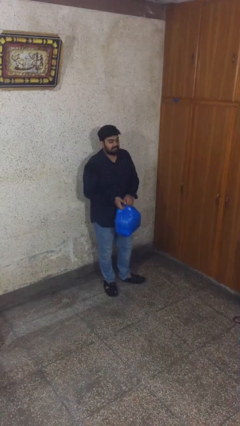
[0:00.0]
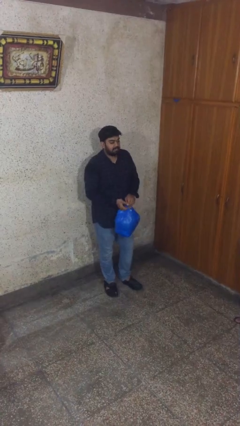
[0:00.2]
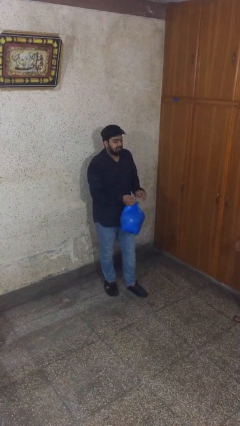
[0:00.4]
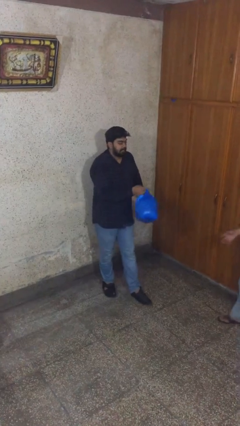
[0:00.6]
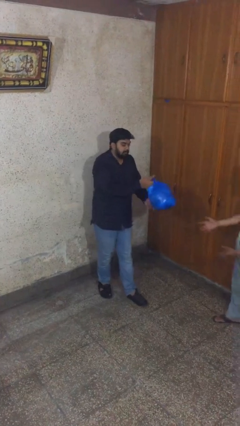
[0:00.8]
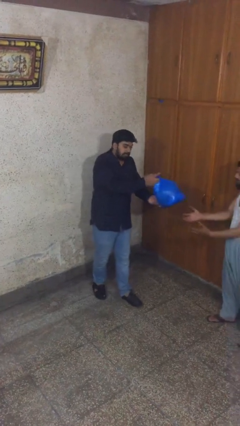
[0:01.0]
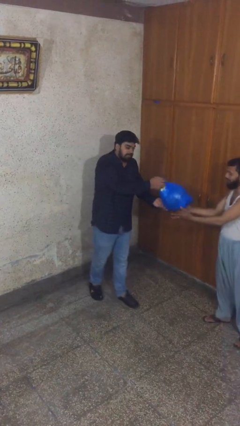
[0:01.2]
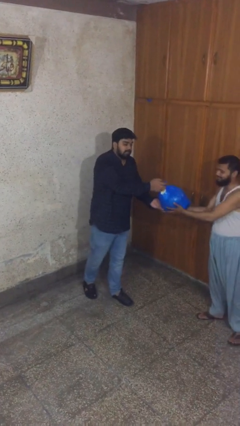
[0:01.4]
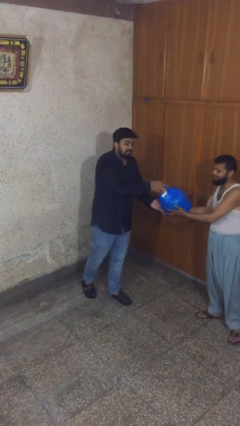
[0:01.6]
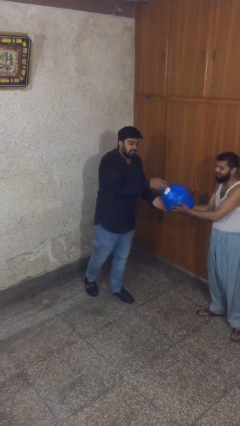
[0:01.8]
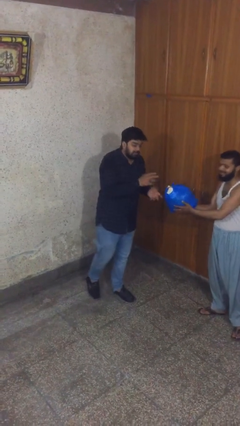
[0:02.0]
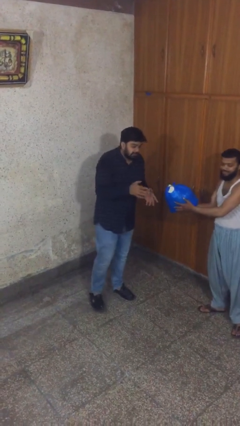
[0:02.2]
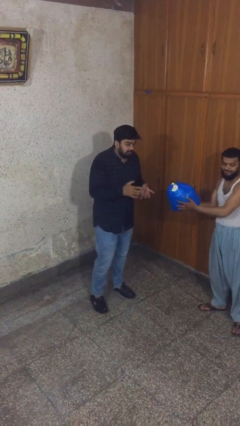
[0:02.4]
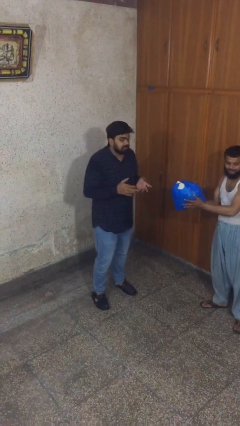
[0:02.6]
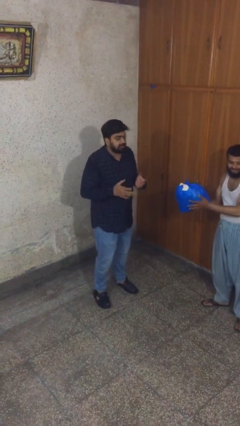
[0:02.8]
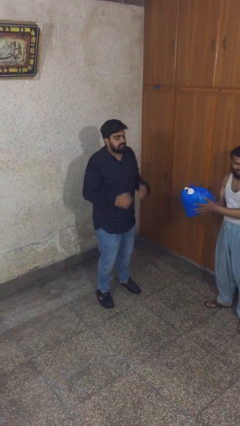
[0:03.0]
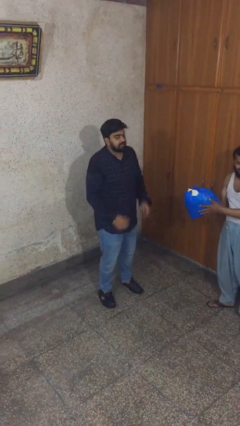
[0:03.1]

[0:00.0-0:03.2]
person transfers object to person

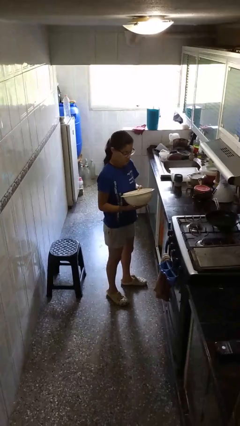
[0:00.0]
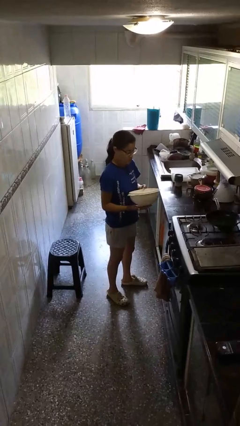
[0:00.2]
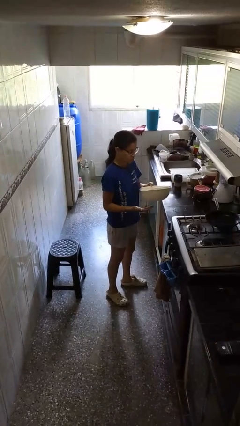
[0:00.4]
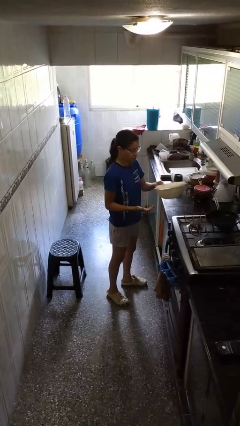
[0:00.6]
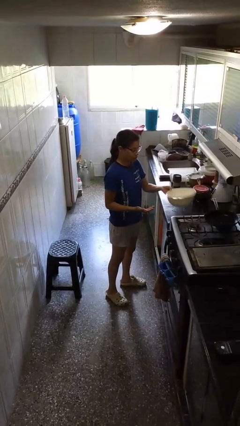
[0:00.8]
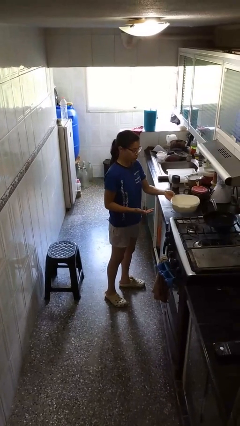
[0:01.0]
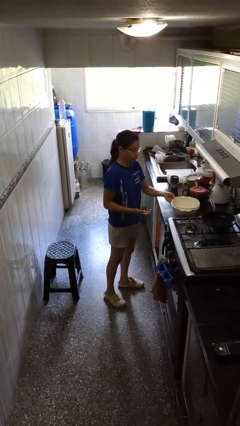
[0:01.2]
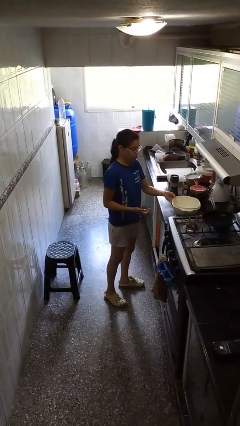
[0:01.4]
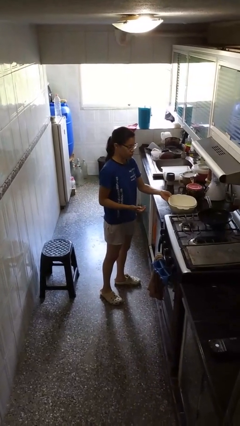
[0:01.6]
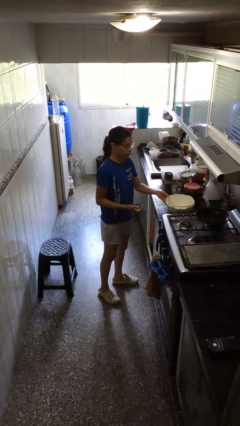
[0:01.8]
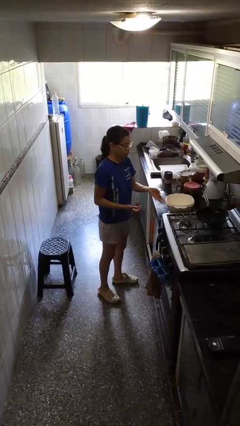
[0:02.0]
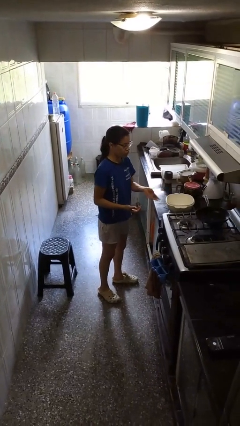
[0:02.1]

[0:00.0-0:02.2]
person puts down object on countertop

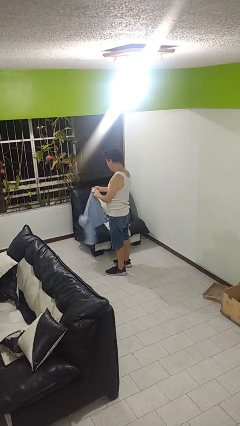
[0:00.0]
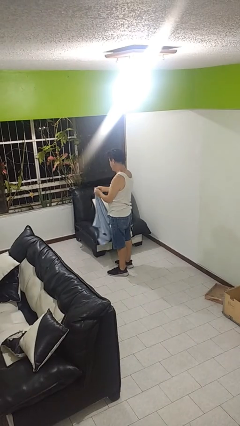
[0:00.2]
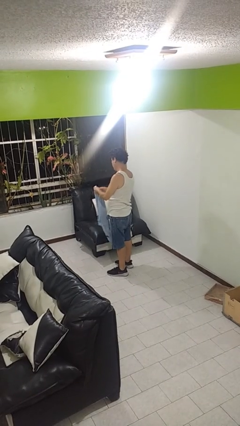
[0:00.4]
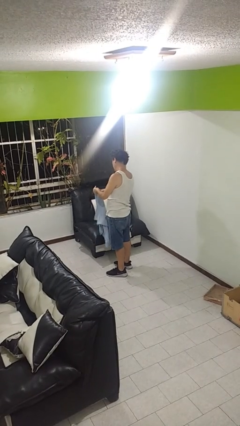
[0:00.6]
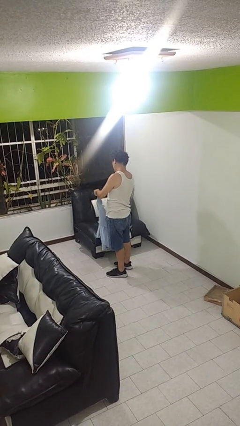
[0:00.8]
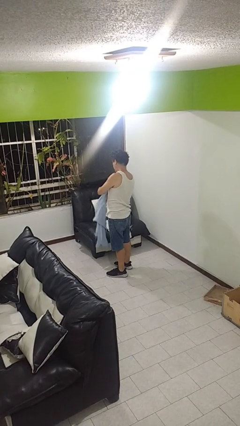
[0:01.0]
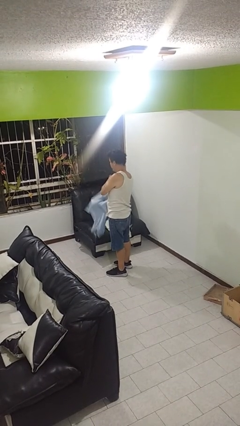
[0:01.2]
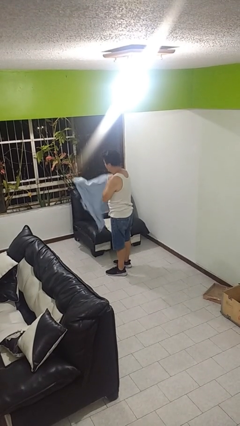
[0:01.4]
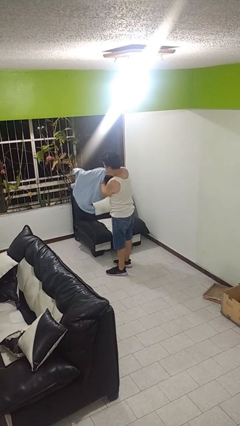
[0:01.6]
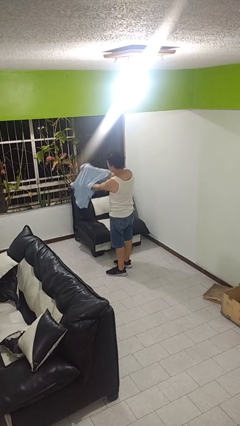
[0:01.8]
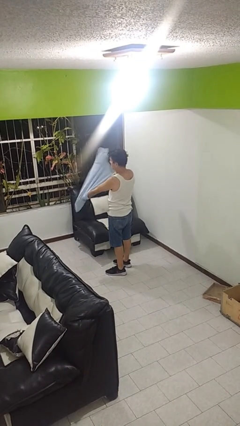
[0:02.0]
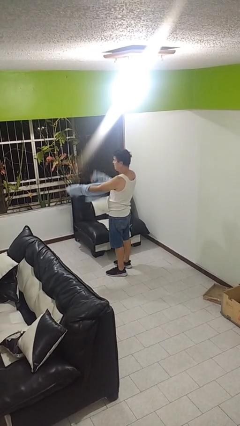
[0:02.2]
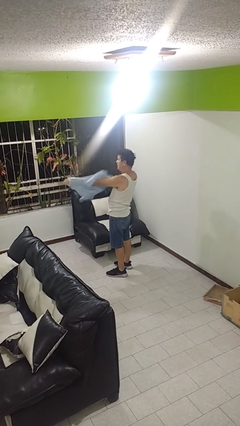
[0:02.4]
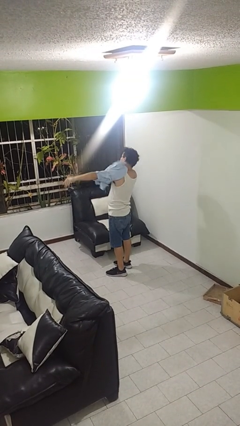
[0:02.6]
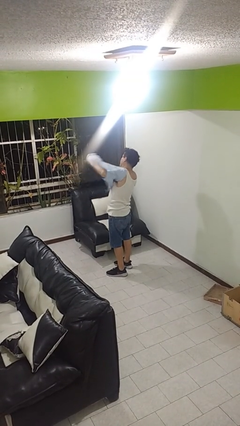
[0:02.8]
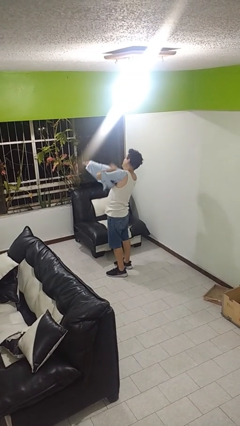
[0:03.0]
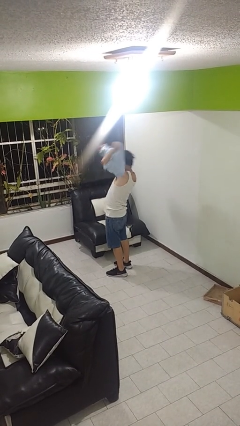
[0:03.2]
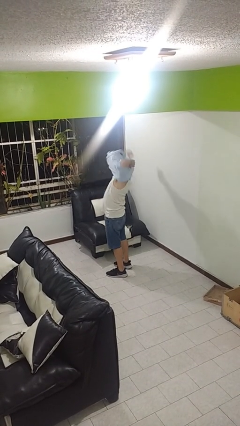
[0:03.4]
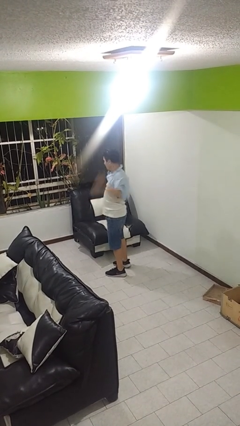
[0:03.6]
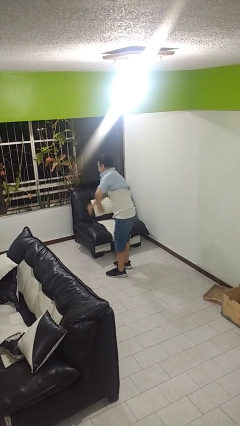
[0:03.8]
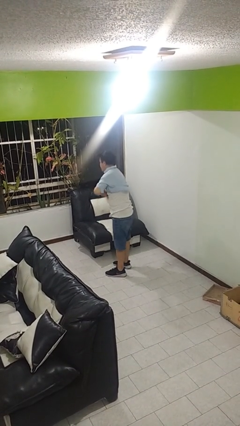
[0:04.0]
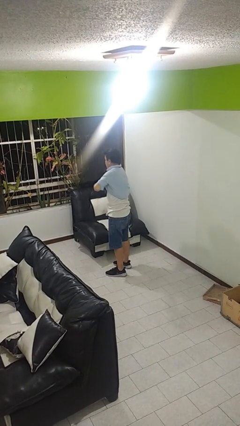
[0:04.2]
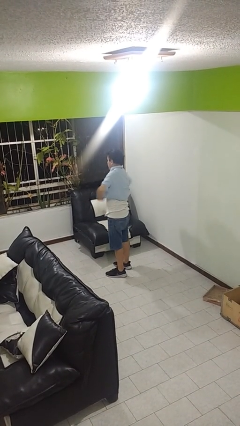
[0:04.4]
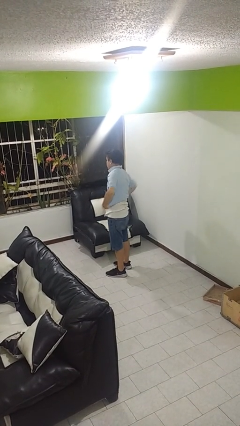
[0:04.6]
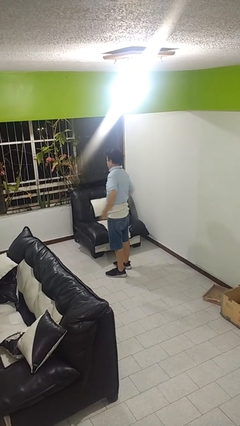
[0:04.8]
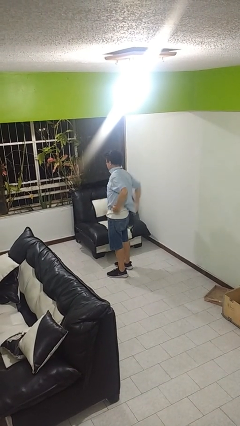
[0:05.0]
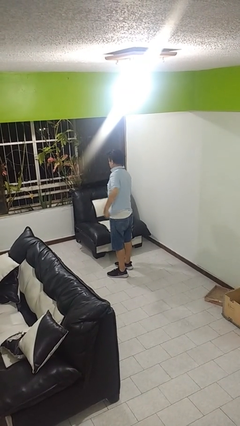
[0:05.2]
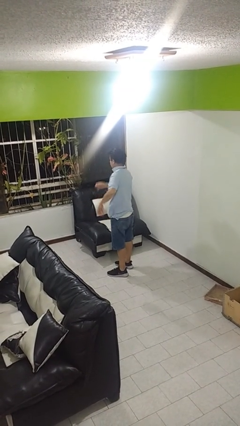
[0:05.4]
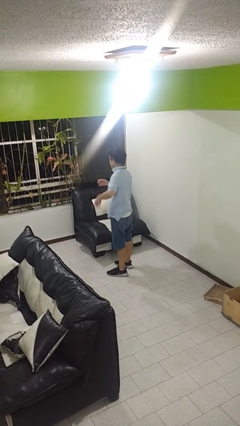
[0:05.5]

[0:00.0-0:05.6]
person puts on shirt

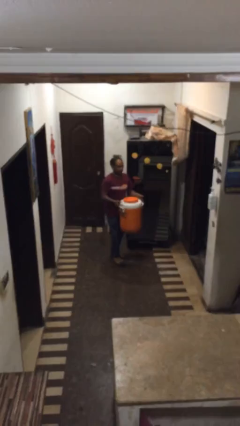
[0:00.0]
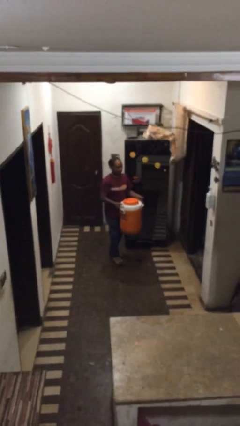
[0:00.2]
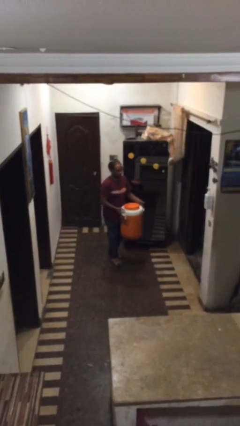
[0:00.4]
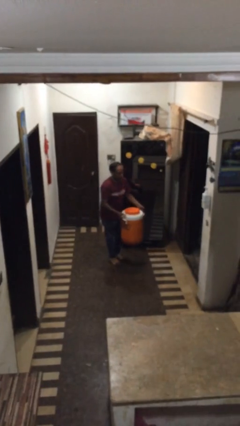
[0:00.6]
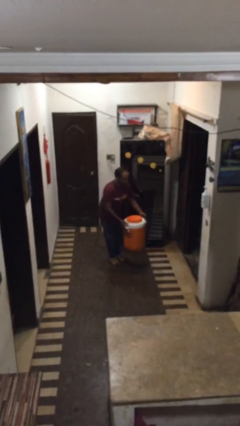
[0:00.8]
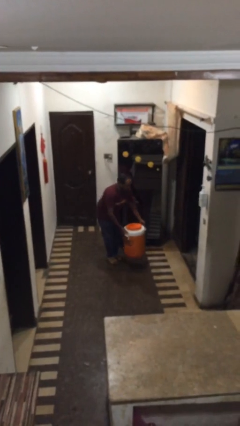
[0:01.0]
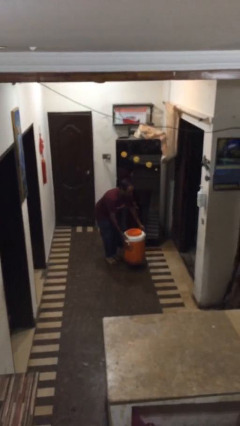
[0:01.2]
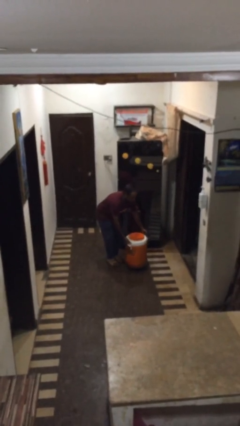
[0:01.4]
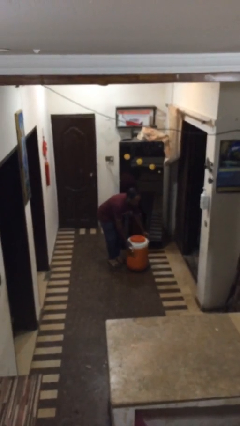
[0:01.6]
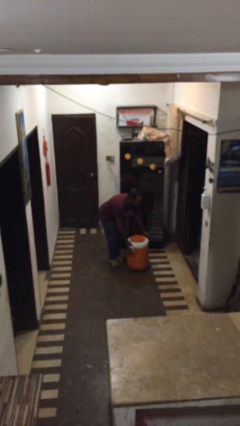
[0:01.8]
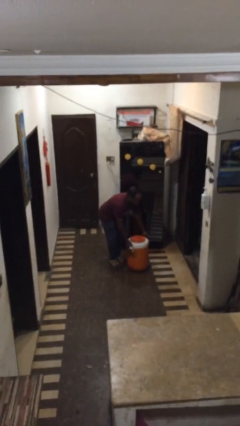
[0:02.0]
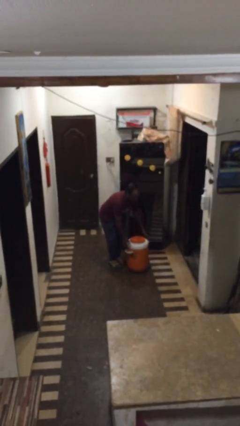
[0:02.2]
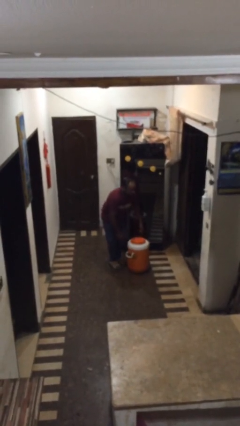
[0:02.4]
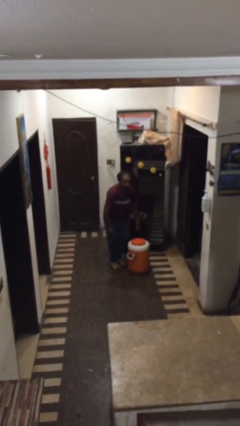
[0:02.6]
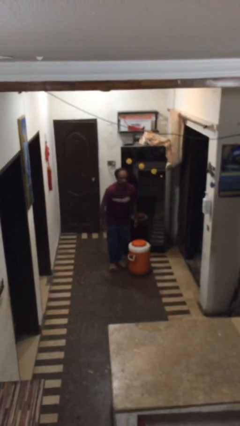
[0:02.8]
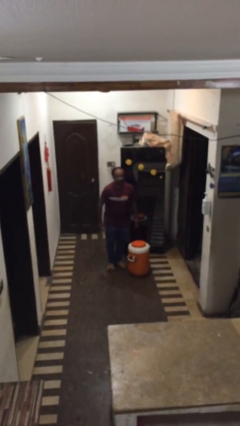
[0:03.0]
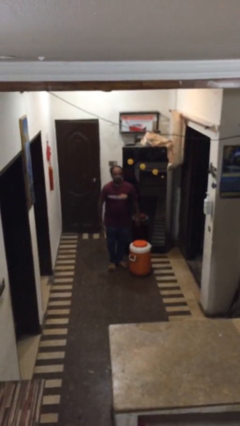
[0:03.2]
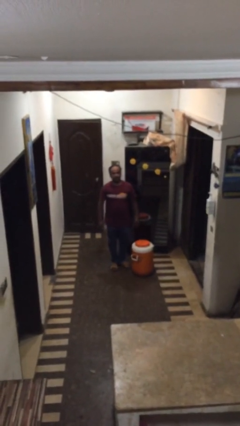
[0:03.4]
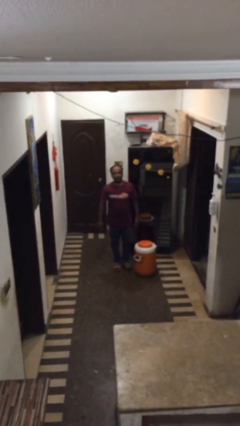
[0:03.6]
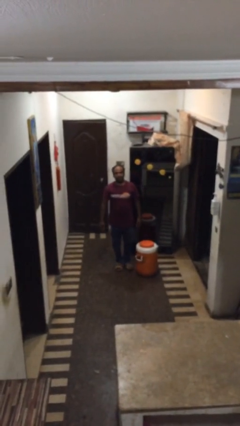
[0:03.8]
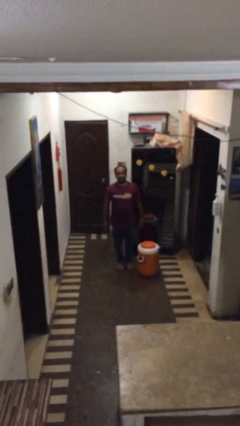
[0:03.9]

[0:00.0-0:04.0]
person puts down object on floor

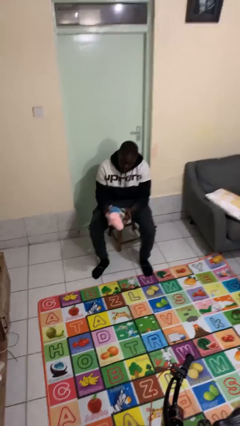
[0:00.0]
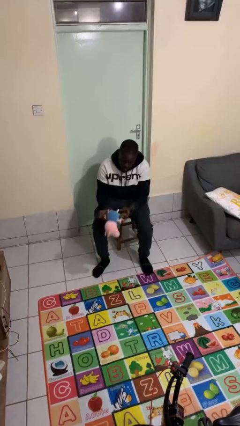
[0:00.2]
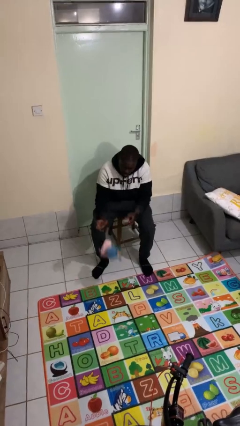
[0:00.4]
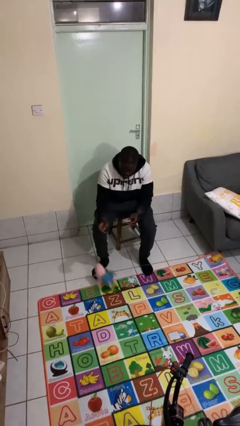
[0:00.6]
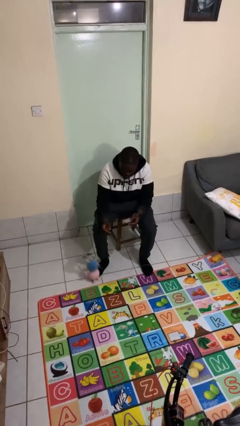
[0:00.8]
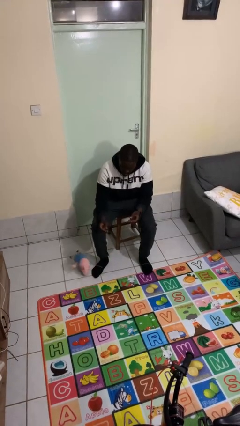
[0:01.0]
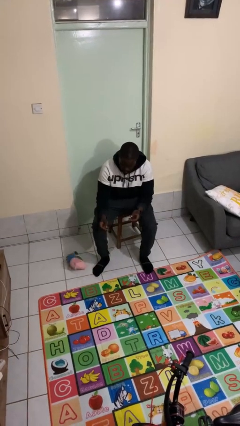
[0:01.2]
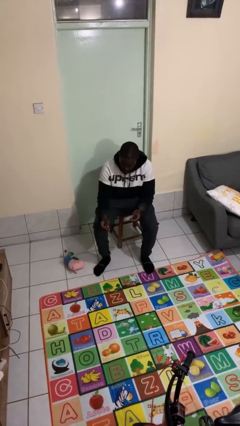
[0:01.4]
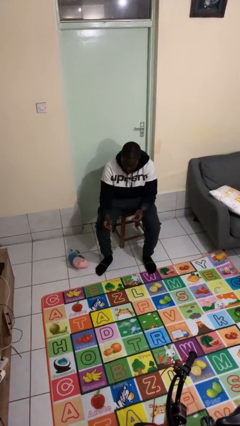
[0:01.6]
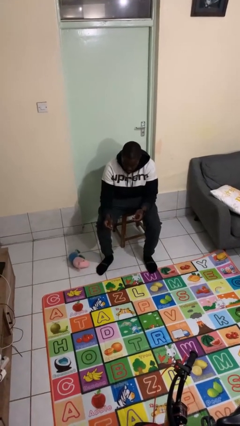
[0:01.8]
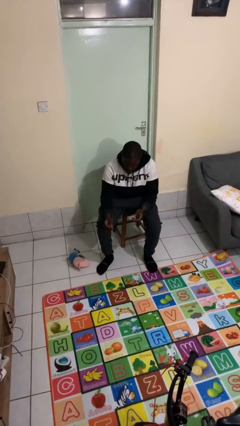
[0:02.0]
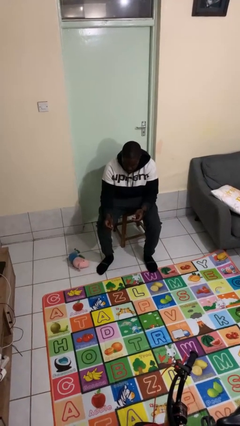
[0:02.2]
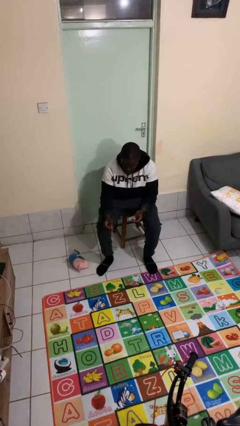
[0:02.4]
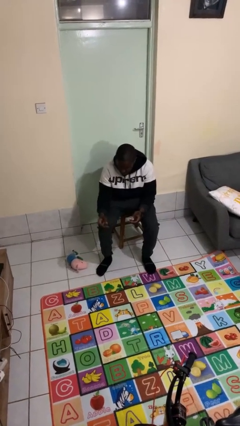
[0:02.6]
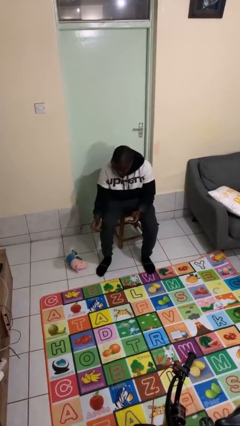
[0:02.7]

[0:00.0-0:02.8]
person drops object
